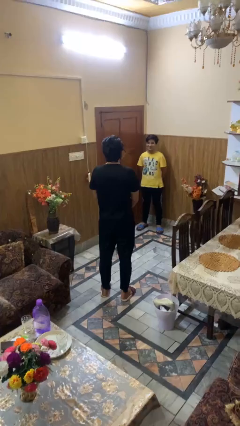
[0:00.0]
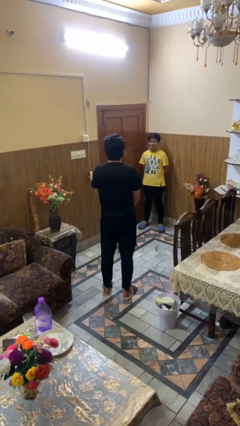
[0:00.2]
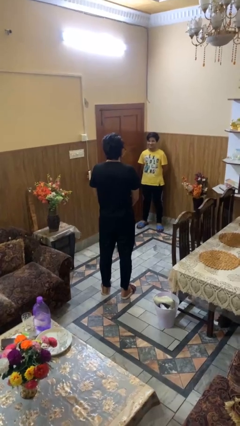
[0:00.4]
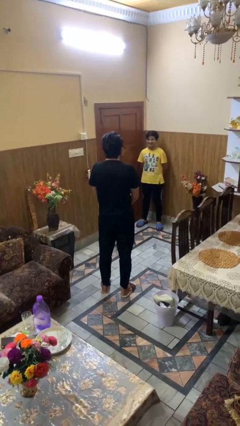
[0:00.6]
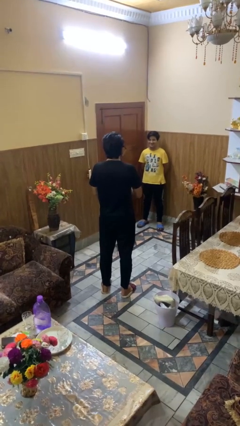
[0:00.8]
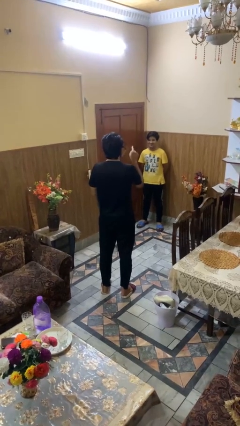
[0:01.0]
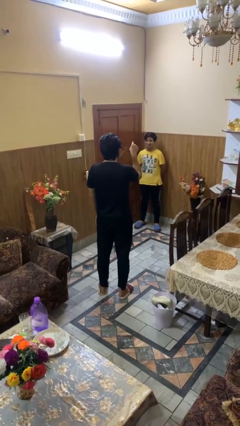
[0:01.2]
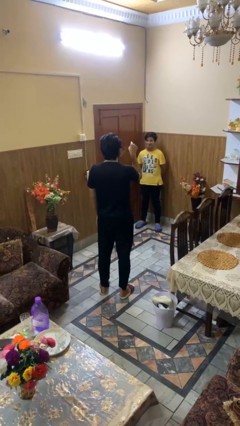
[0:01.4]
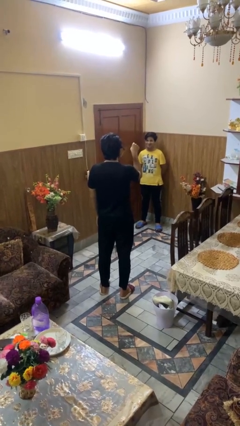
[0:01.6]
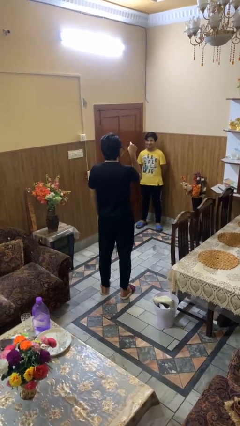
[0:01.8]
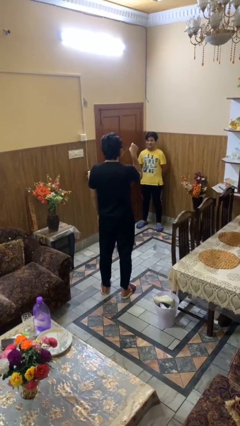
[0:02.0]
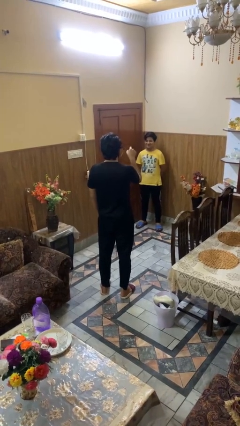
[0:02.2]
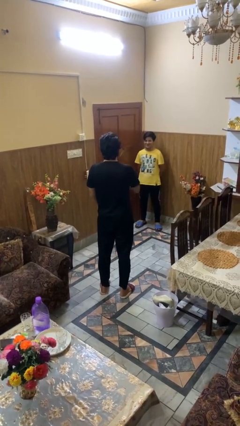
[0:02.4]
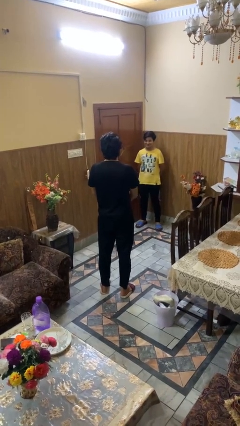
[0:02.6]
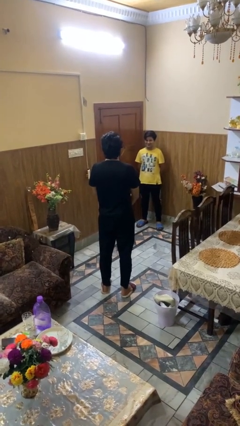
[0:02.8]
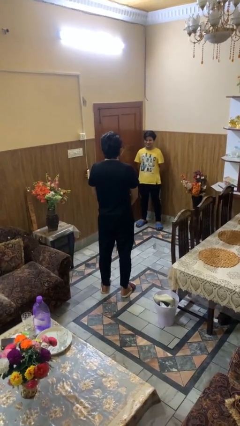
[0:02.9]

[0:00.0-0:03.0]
person points at person

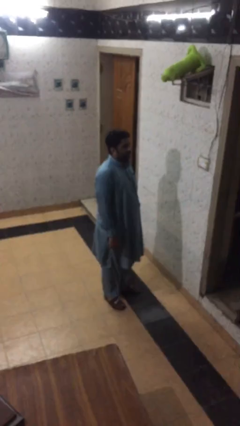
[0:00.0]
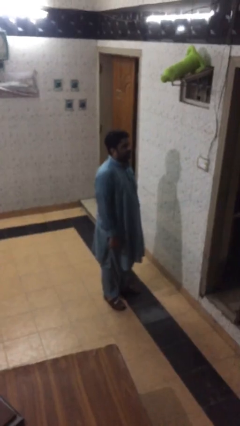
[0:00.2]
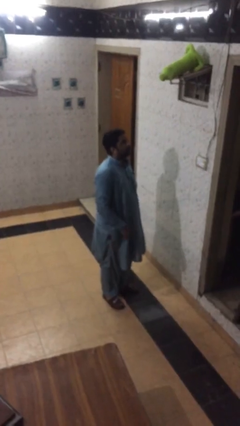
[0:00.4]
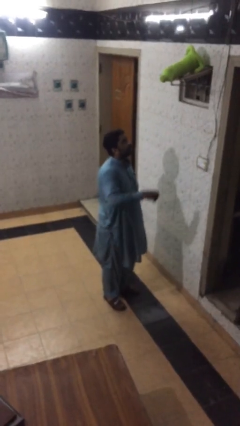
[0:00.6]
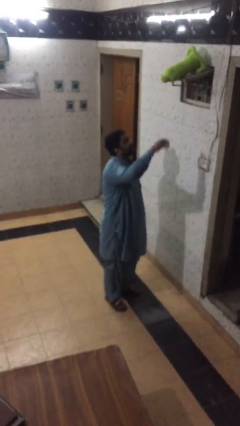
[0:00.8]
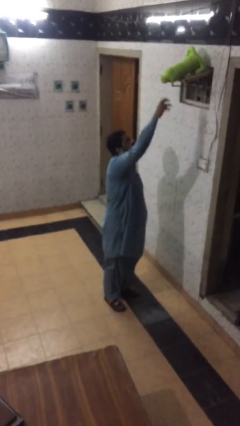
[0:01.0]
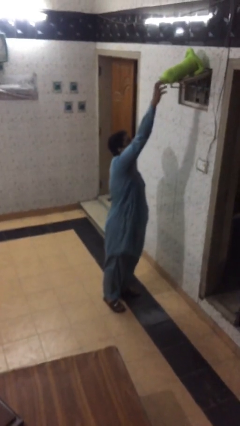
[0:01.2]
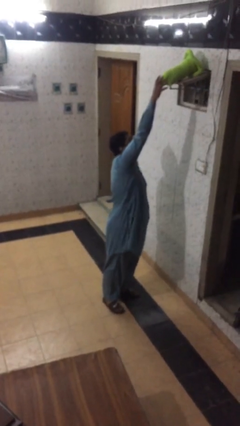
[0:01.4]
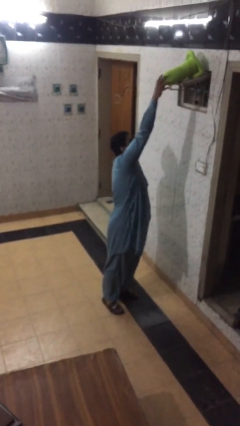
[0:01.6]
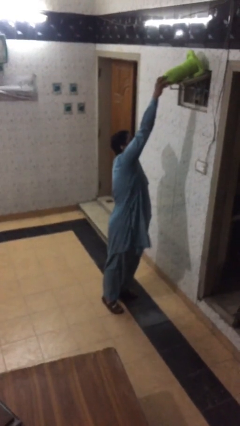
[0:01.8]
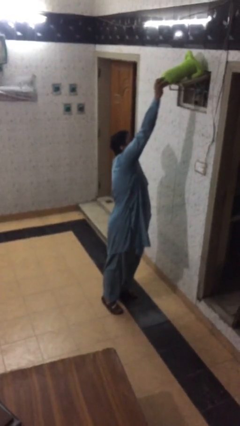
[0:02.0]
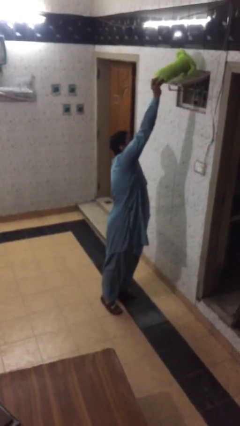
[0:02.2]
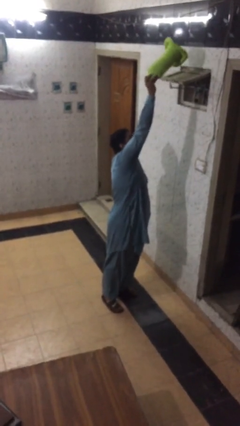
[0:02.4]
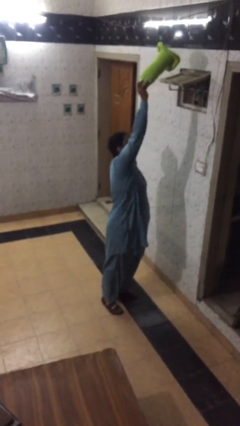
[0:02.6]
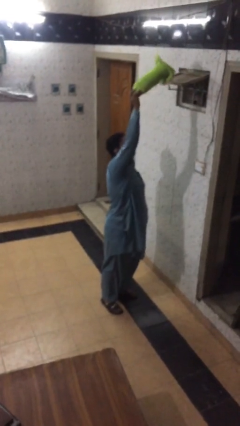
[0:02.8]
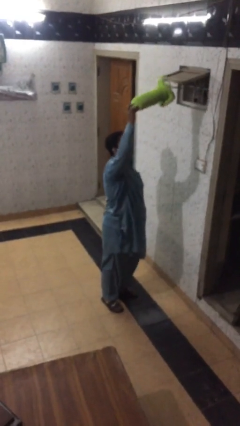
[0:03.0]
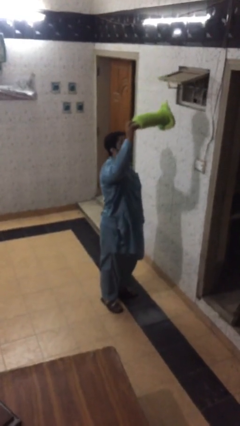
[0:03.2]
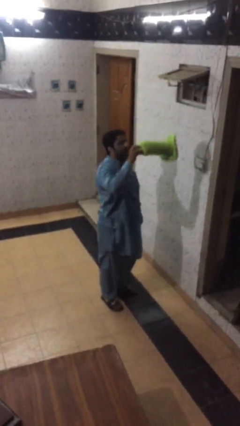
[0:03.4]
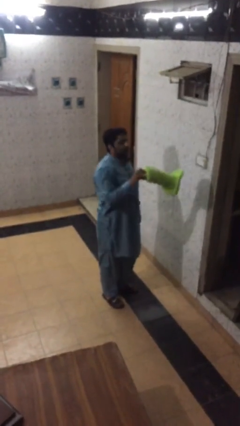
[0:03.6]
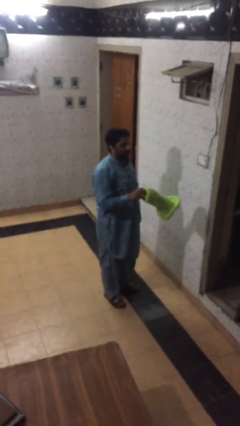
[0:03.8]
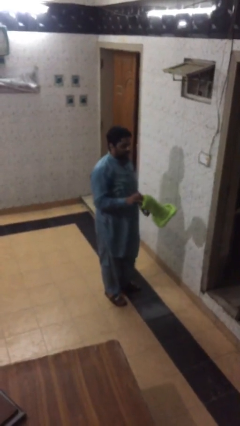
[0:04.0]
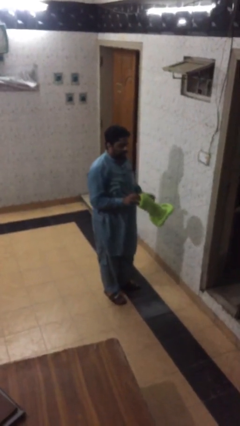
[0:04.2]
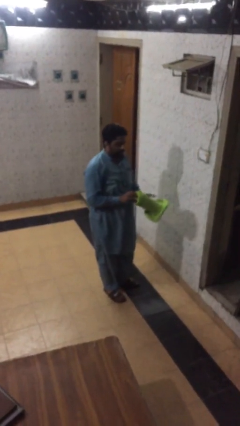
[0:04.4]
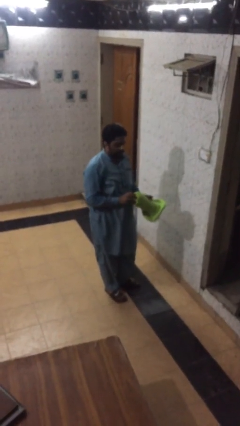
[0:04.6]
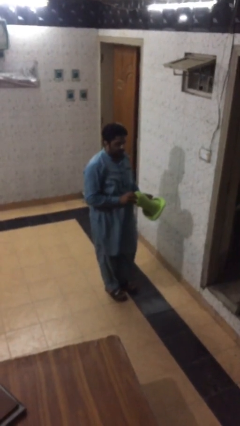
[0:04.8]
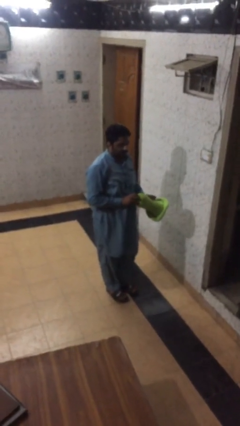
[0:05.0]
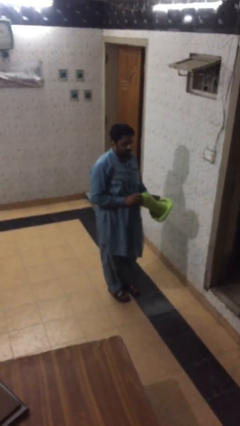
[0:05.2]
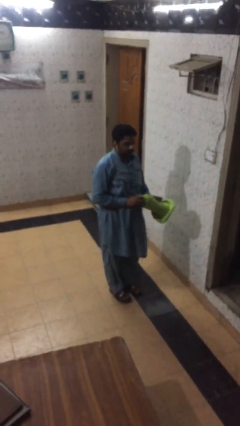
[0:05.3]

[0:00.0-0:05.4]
person picks up object from shelf

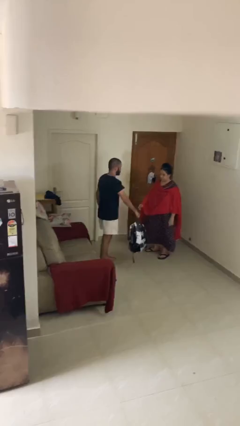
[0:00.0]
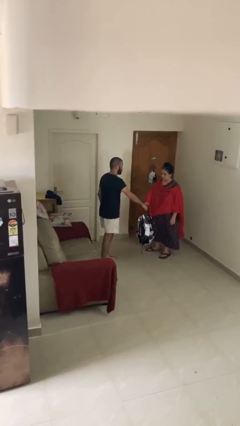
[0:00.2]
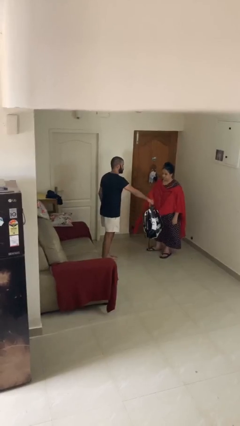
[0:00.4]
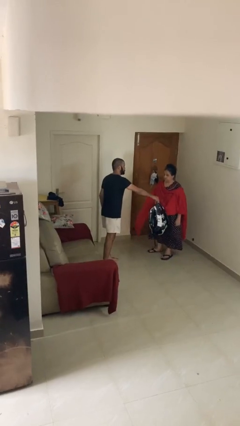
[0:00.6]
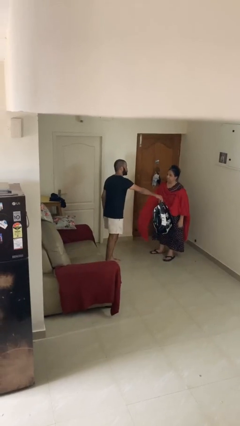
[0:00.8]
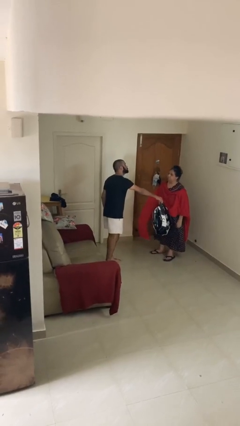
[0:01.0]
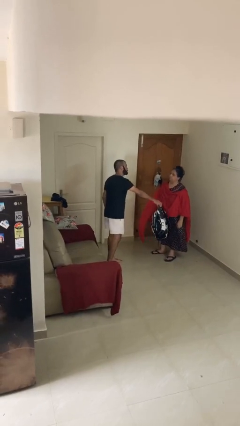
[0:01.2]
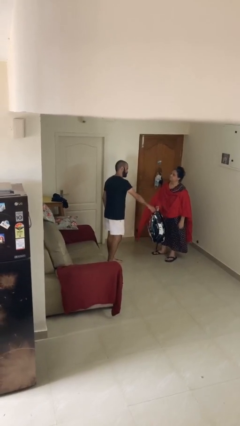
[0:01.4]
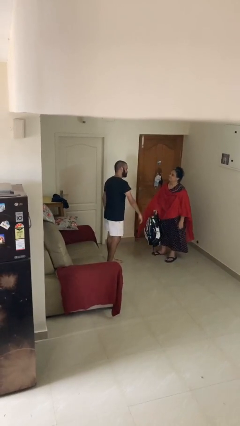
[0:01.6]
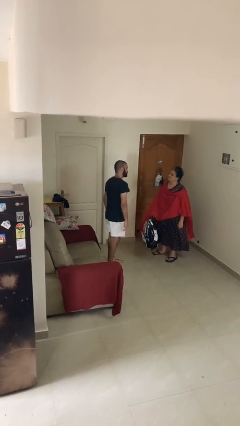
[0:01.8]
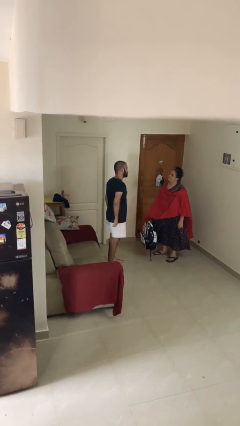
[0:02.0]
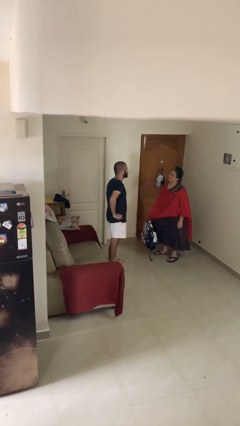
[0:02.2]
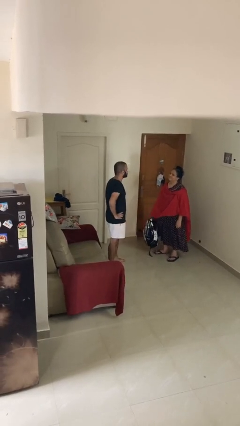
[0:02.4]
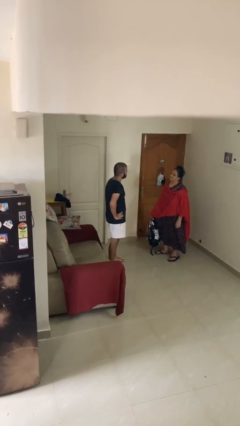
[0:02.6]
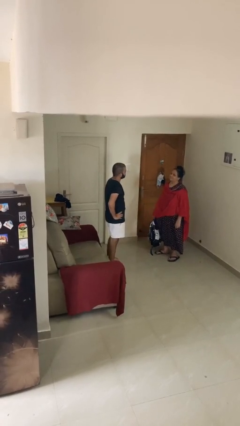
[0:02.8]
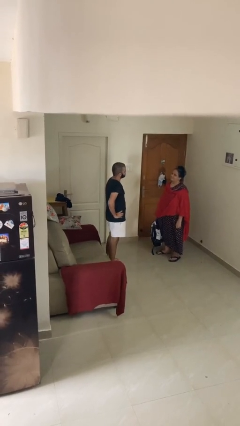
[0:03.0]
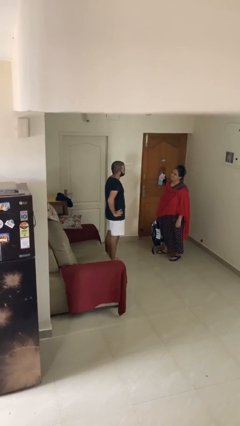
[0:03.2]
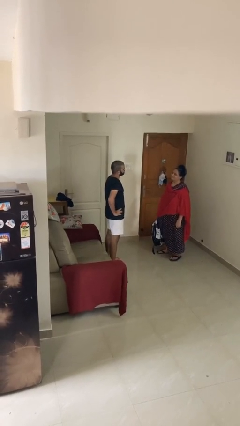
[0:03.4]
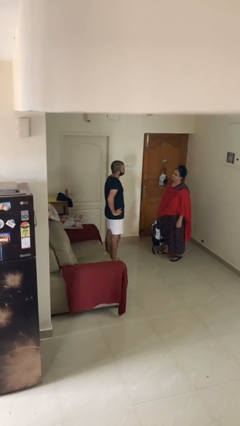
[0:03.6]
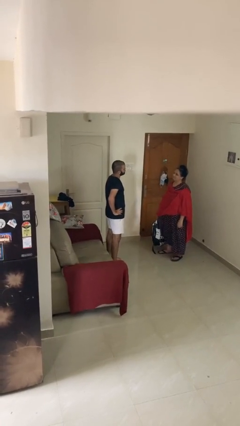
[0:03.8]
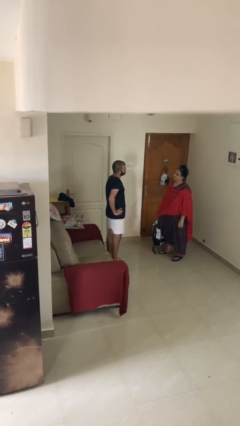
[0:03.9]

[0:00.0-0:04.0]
person transfers object to person

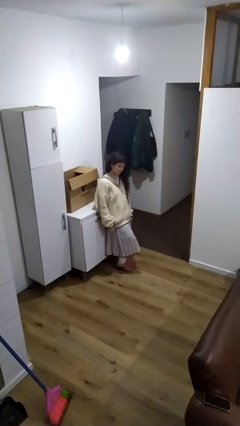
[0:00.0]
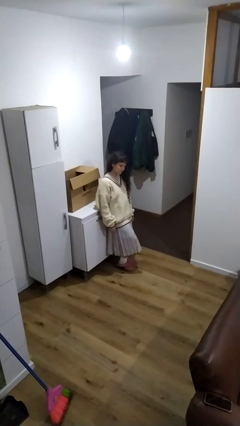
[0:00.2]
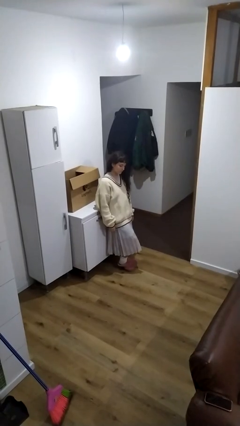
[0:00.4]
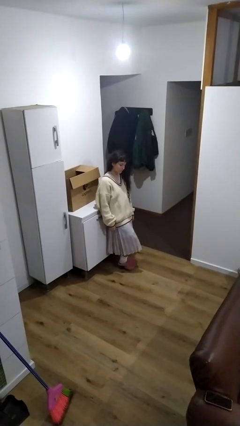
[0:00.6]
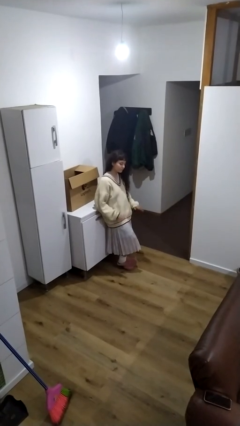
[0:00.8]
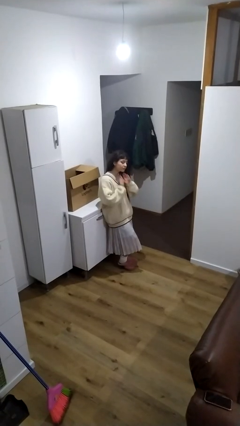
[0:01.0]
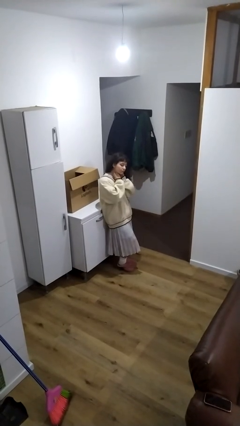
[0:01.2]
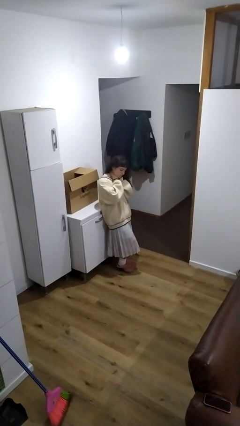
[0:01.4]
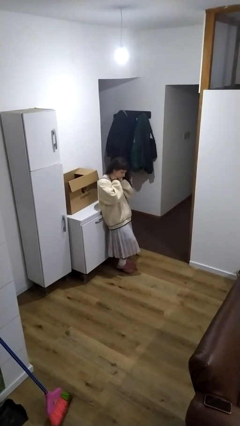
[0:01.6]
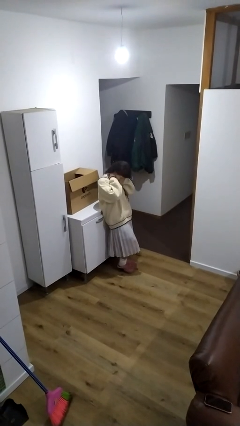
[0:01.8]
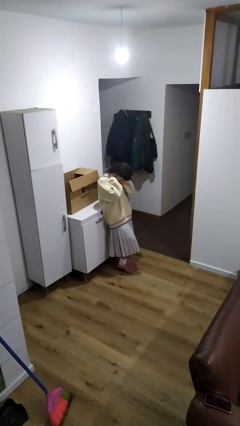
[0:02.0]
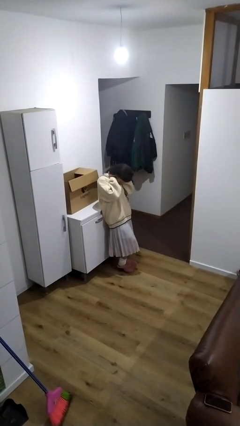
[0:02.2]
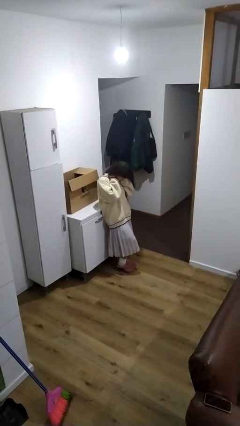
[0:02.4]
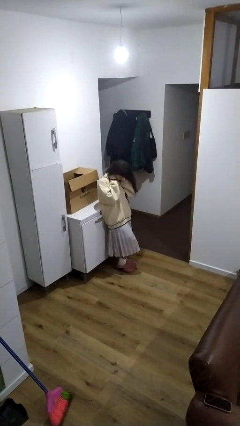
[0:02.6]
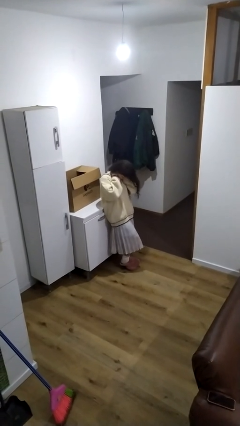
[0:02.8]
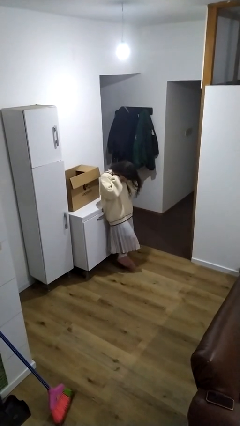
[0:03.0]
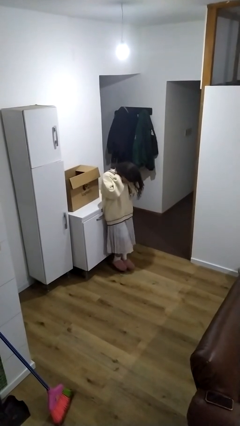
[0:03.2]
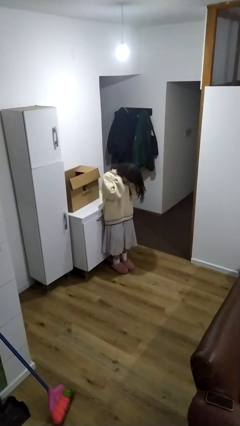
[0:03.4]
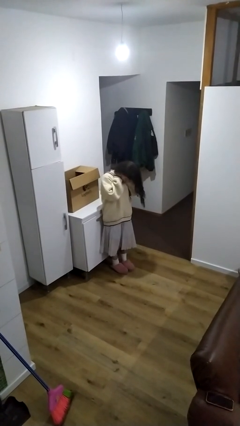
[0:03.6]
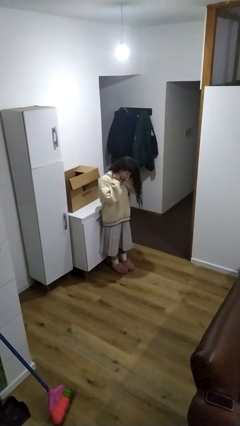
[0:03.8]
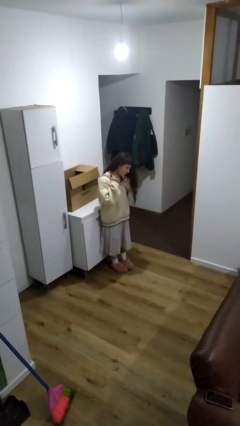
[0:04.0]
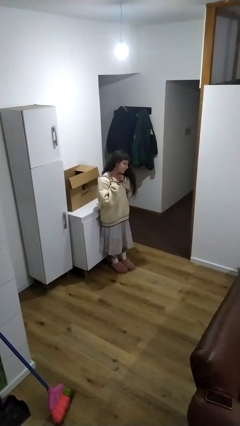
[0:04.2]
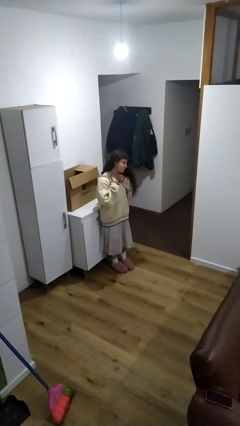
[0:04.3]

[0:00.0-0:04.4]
person rubs neck

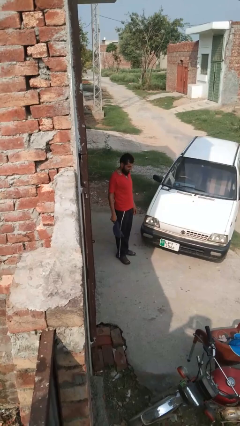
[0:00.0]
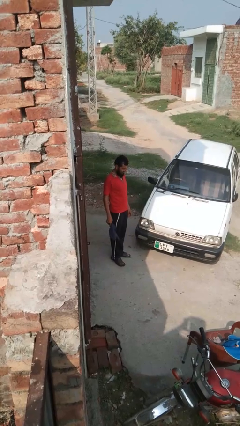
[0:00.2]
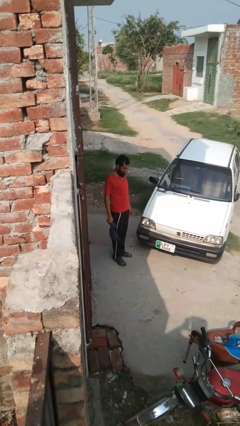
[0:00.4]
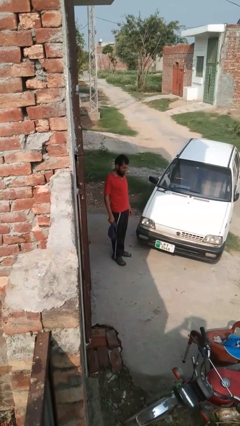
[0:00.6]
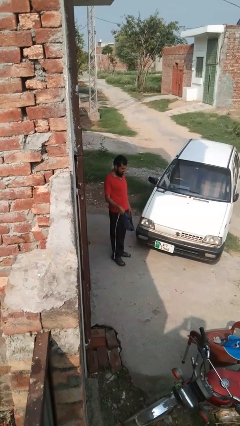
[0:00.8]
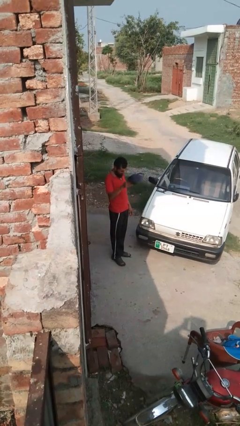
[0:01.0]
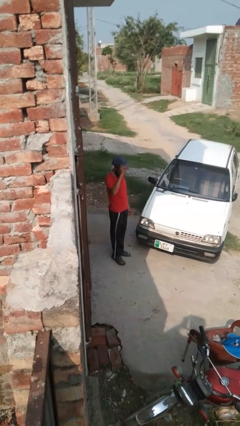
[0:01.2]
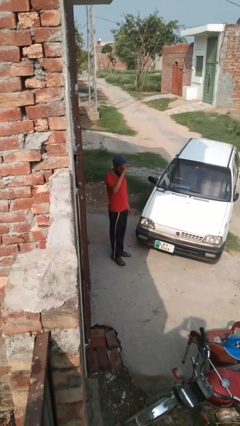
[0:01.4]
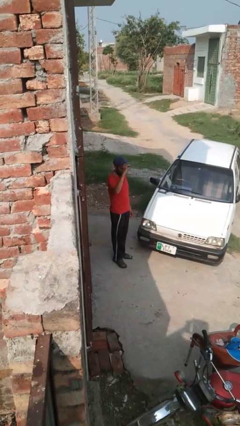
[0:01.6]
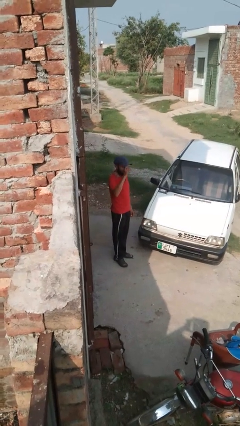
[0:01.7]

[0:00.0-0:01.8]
person puts on hat
